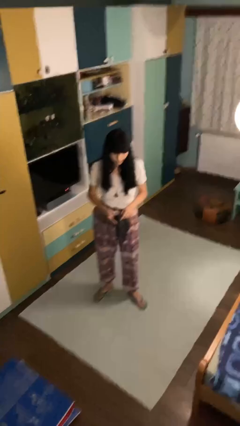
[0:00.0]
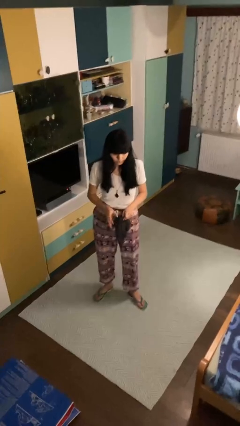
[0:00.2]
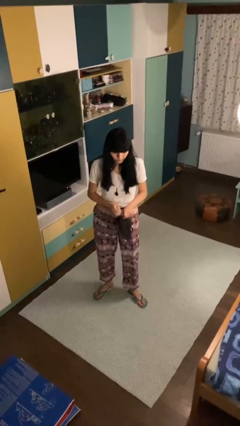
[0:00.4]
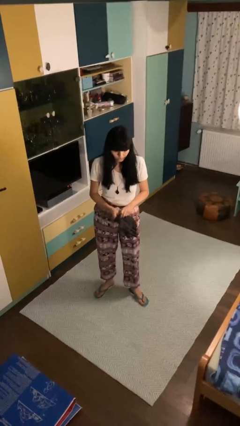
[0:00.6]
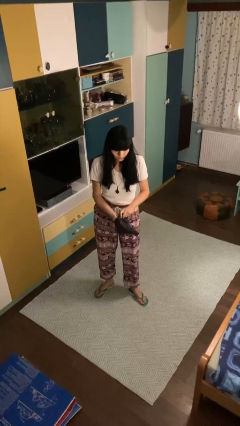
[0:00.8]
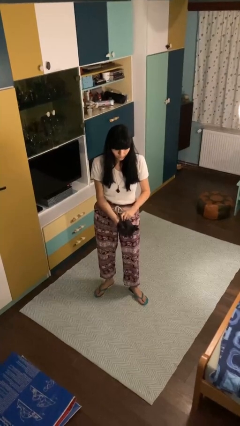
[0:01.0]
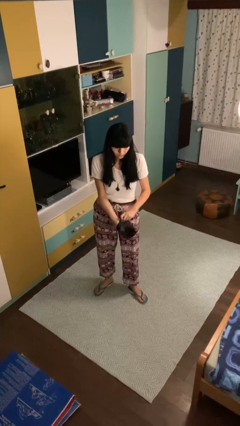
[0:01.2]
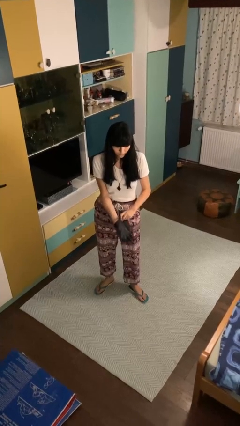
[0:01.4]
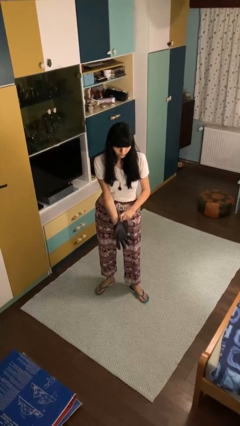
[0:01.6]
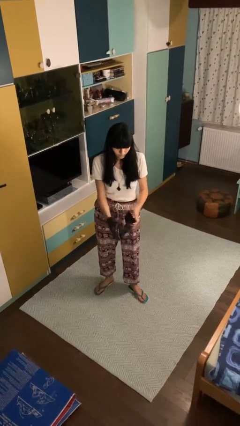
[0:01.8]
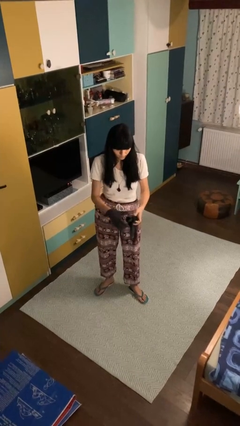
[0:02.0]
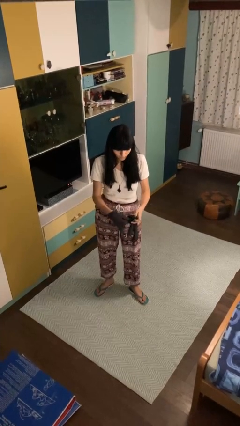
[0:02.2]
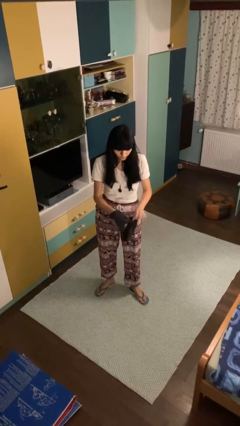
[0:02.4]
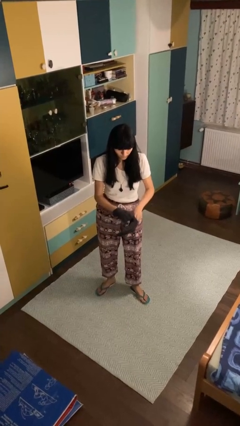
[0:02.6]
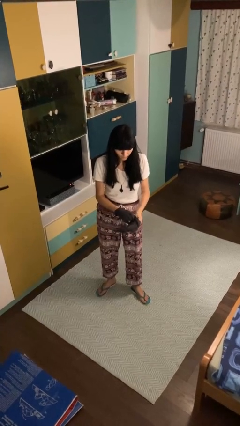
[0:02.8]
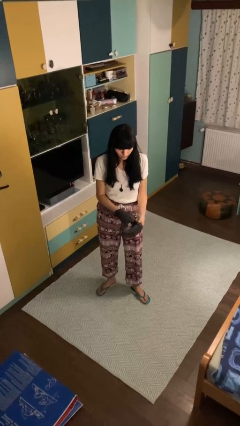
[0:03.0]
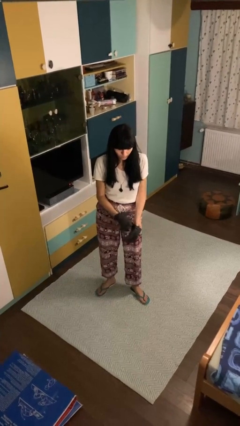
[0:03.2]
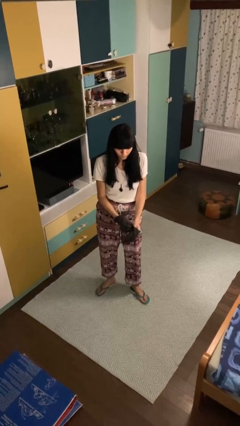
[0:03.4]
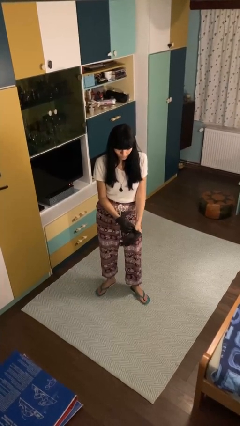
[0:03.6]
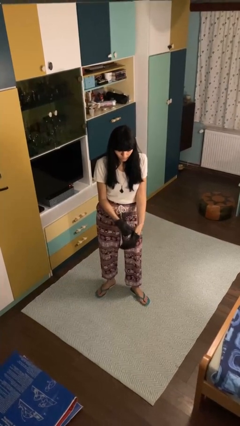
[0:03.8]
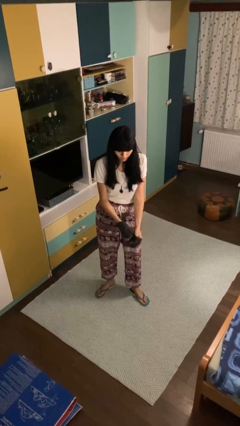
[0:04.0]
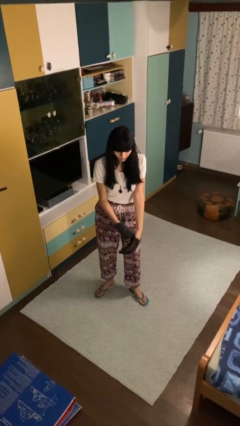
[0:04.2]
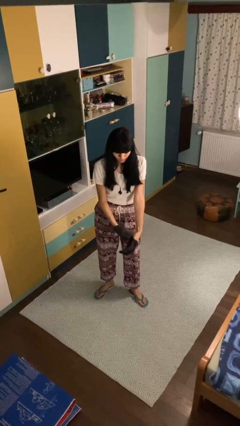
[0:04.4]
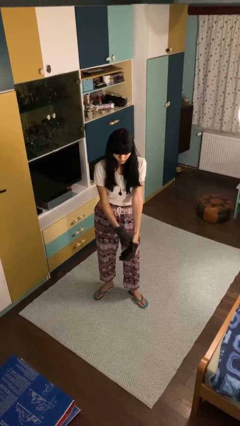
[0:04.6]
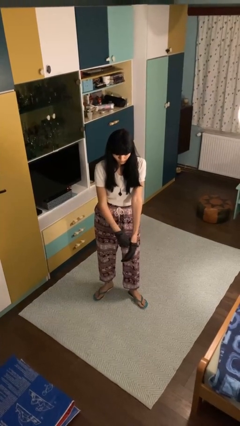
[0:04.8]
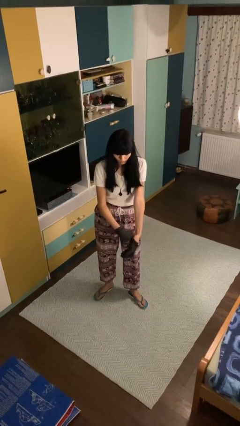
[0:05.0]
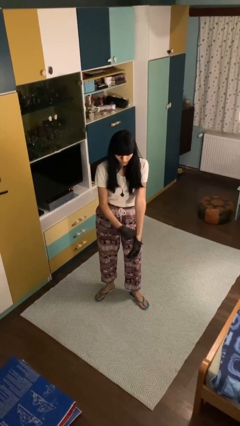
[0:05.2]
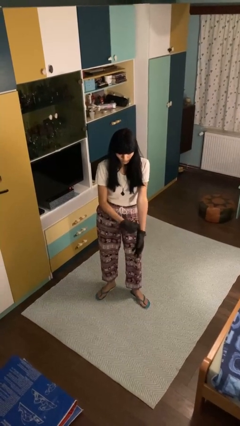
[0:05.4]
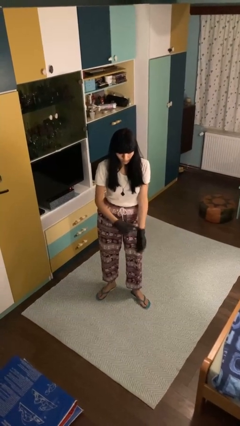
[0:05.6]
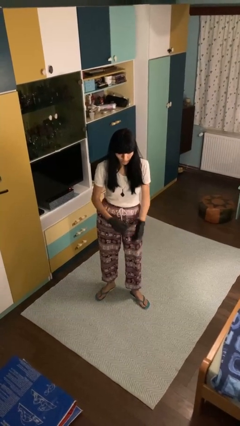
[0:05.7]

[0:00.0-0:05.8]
person puts on gloves

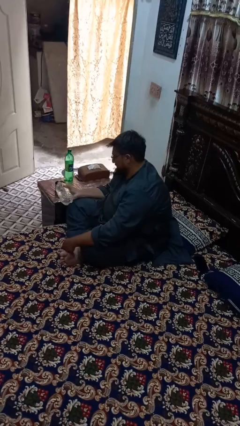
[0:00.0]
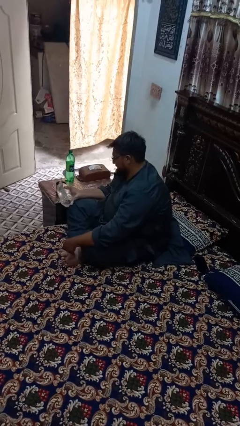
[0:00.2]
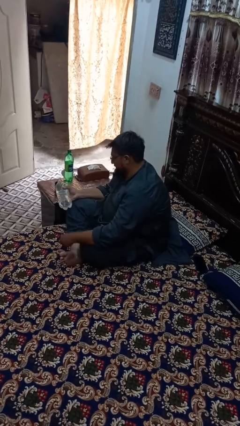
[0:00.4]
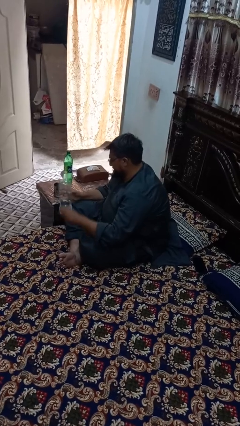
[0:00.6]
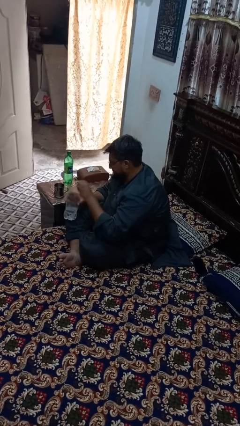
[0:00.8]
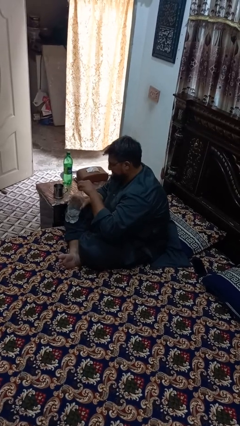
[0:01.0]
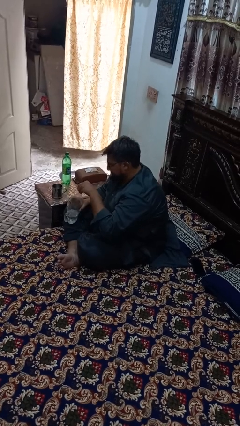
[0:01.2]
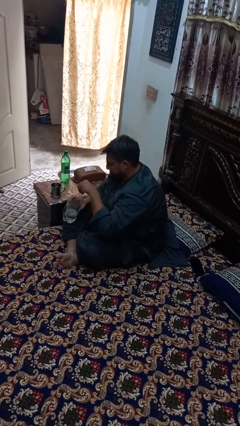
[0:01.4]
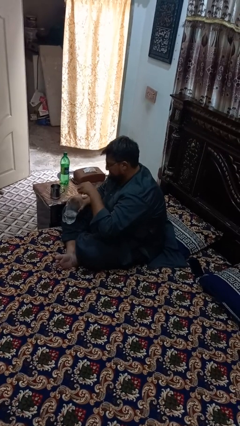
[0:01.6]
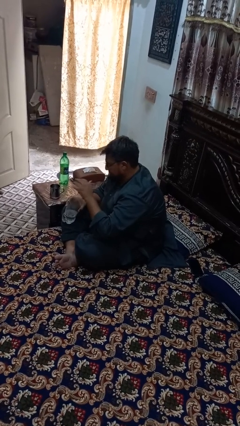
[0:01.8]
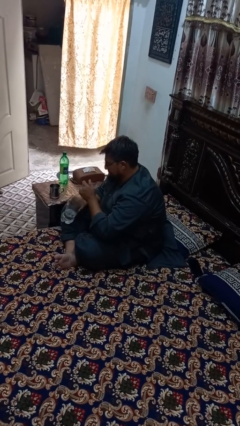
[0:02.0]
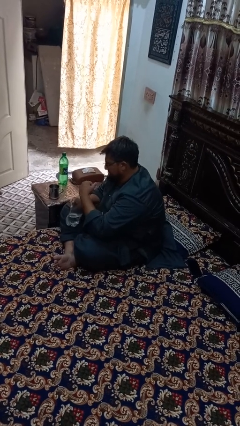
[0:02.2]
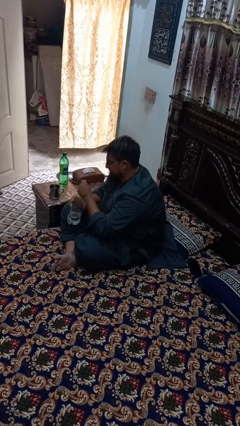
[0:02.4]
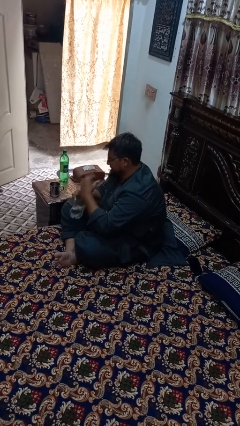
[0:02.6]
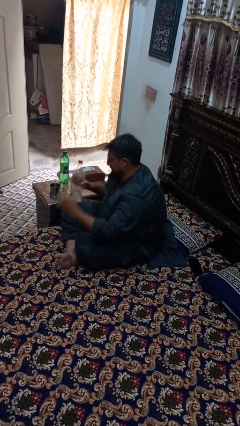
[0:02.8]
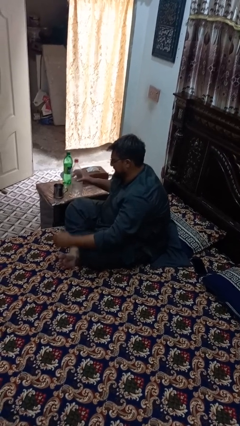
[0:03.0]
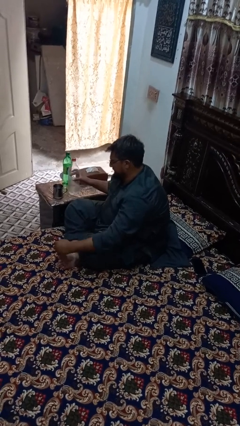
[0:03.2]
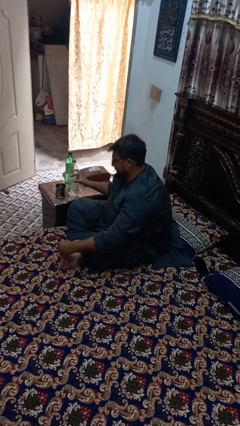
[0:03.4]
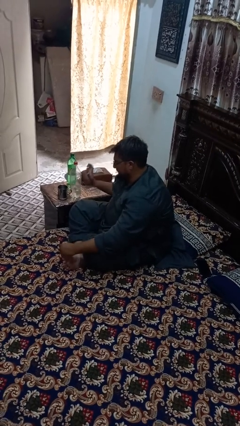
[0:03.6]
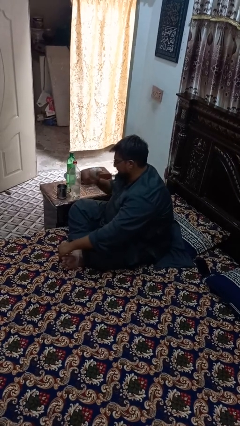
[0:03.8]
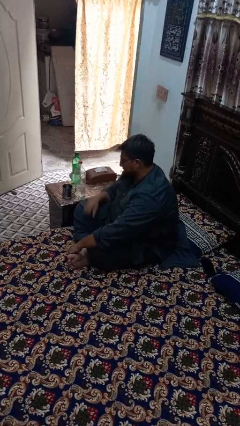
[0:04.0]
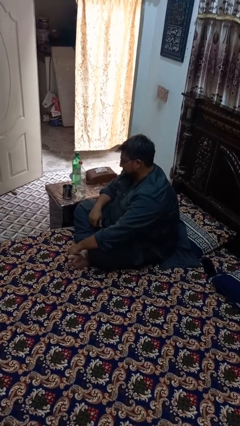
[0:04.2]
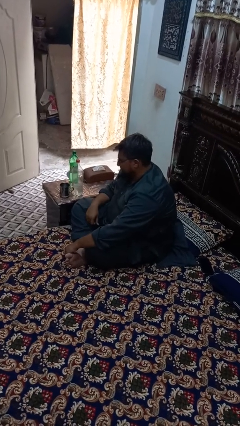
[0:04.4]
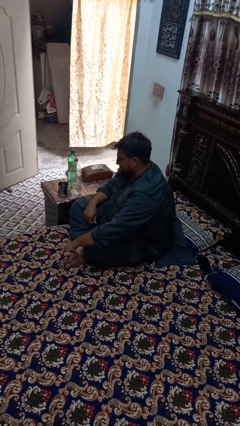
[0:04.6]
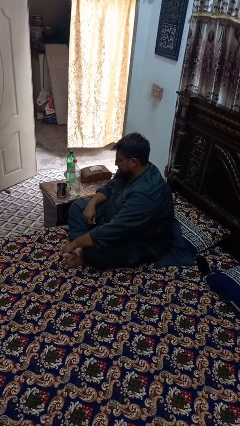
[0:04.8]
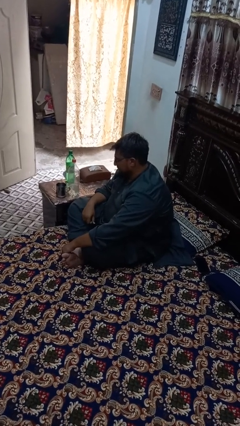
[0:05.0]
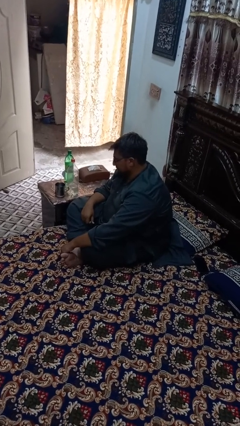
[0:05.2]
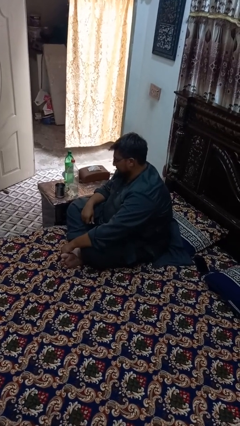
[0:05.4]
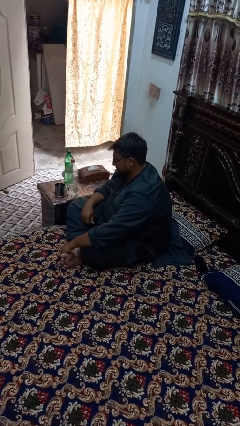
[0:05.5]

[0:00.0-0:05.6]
person screws lid to bottle

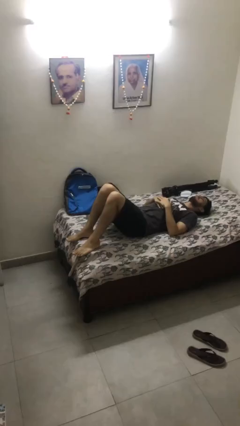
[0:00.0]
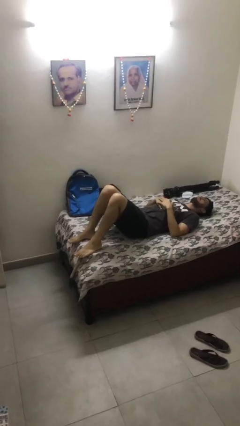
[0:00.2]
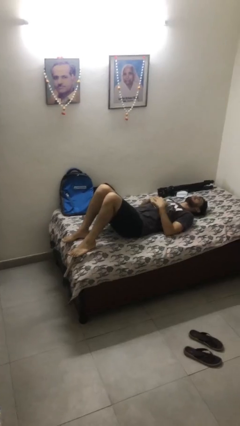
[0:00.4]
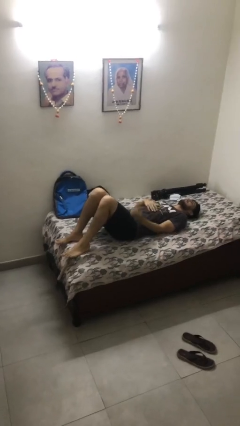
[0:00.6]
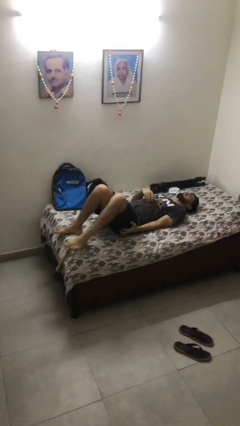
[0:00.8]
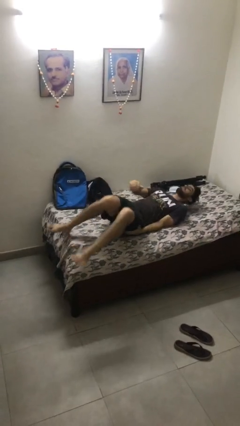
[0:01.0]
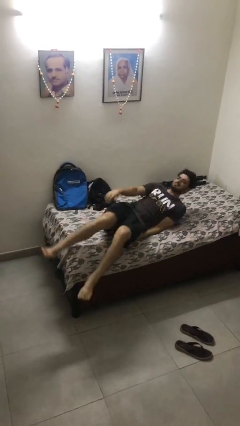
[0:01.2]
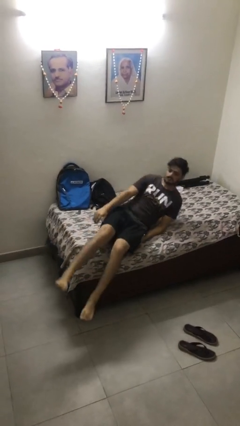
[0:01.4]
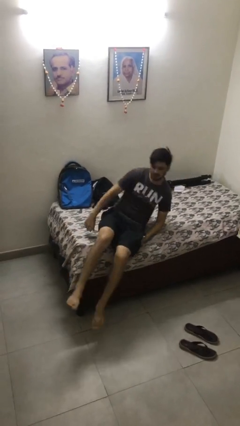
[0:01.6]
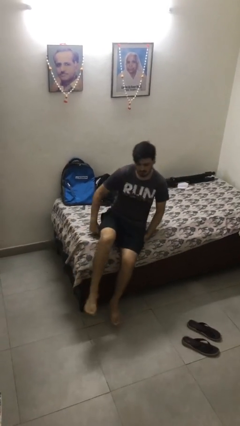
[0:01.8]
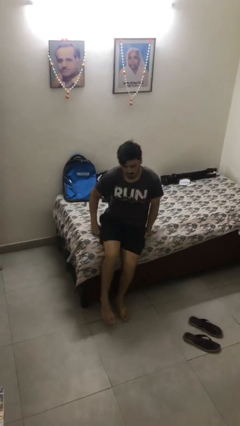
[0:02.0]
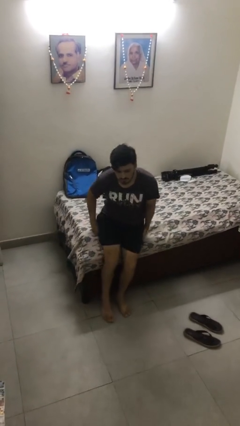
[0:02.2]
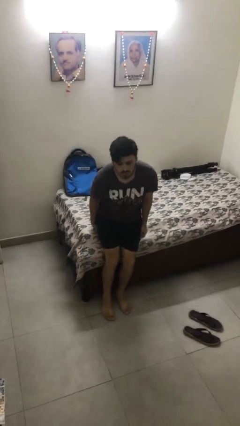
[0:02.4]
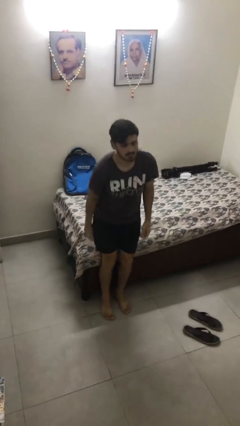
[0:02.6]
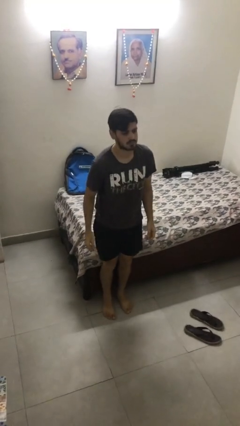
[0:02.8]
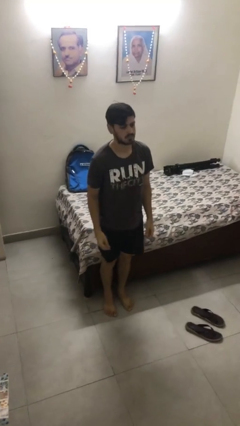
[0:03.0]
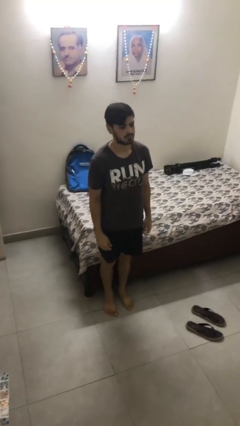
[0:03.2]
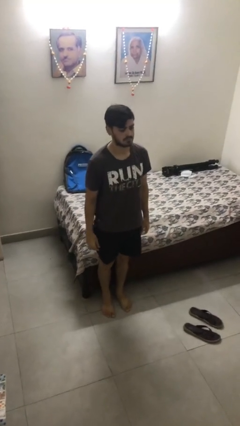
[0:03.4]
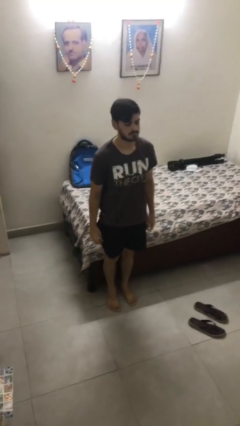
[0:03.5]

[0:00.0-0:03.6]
person stands up

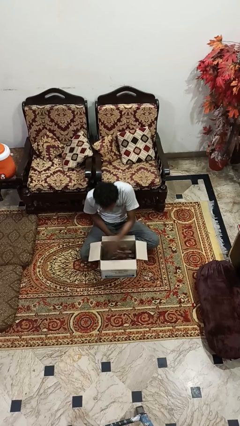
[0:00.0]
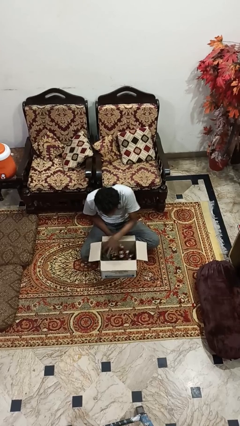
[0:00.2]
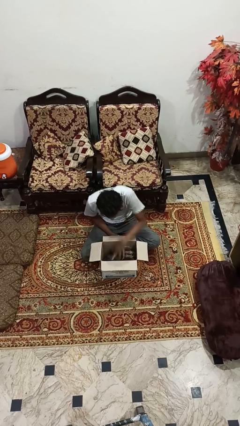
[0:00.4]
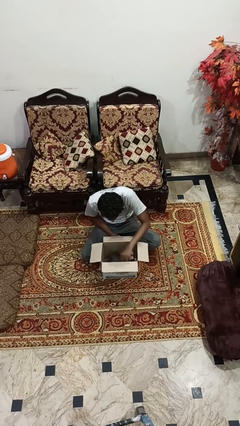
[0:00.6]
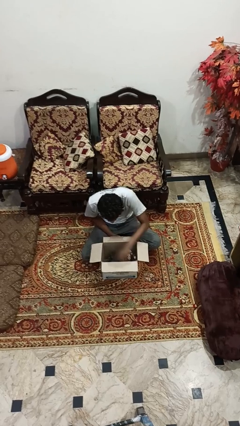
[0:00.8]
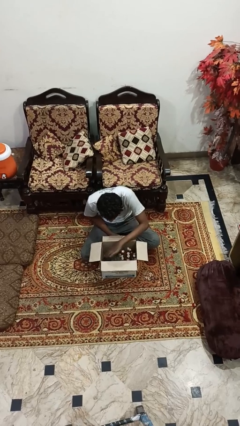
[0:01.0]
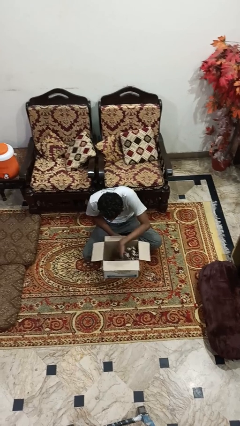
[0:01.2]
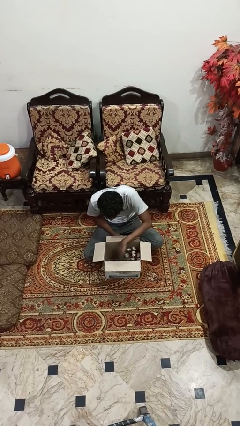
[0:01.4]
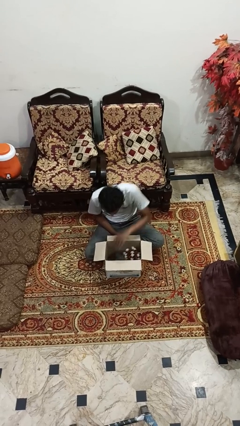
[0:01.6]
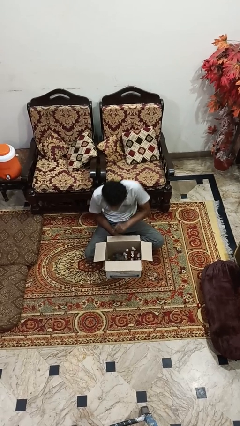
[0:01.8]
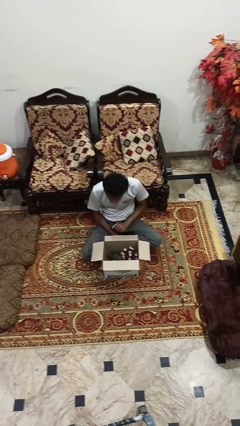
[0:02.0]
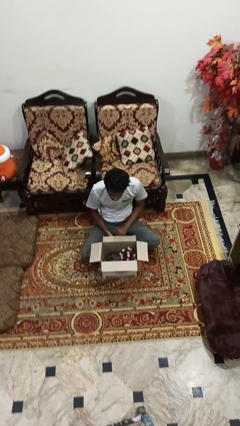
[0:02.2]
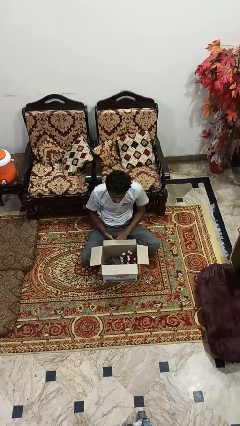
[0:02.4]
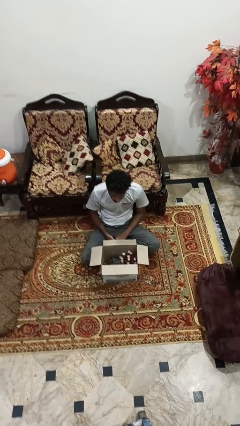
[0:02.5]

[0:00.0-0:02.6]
person searches in box

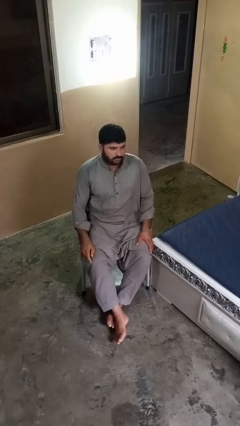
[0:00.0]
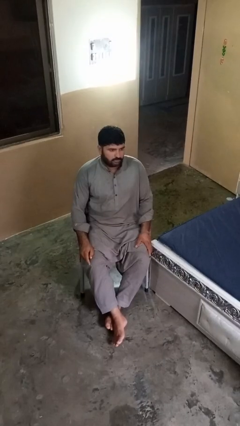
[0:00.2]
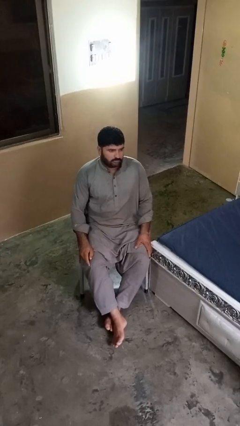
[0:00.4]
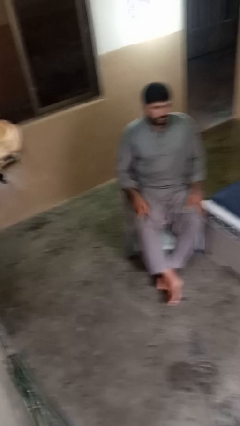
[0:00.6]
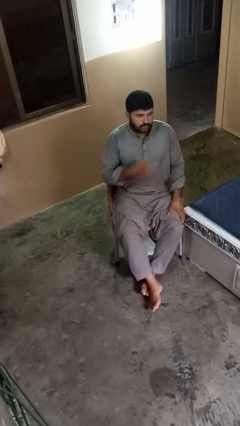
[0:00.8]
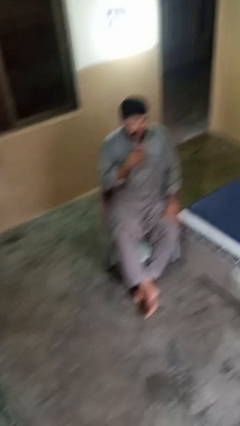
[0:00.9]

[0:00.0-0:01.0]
person gestures be quiet
